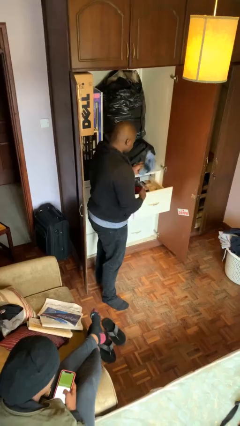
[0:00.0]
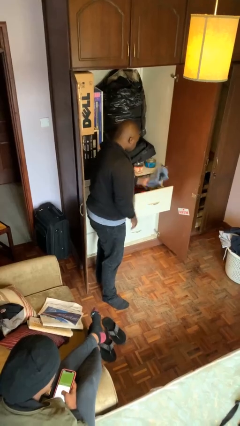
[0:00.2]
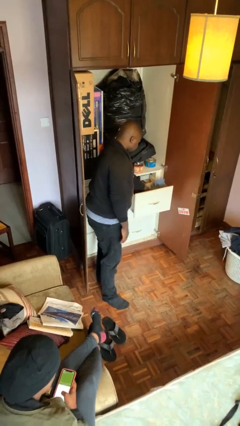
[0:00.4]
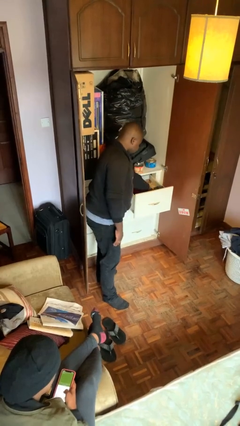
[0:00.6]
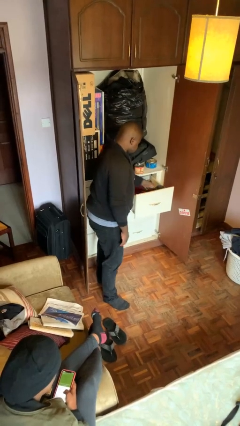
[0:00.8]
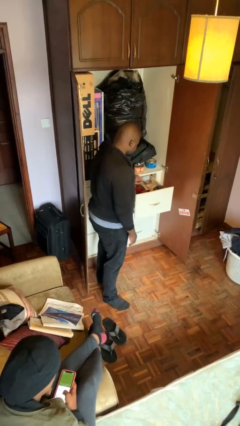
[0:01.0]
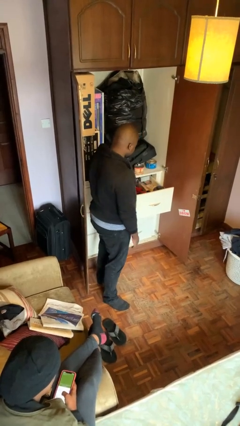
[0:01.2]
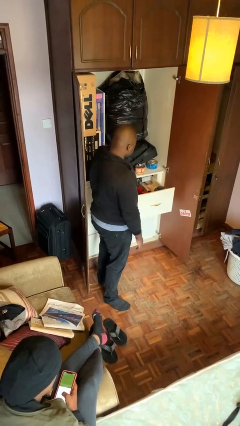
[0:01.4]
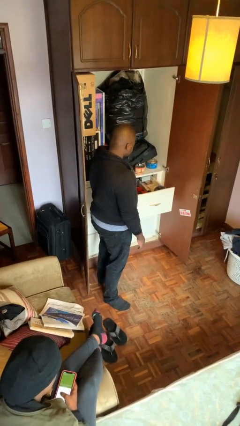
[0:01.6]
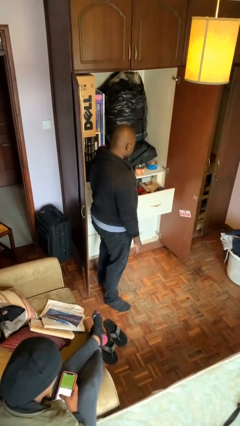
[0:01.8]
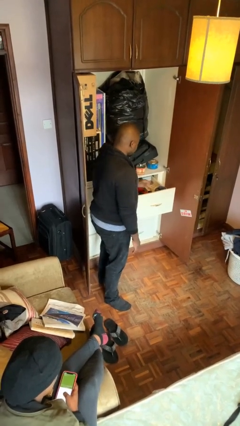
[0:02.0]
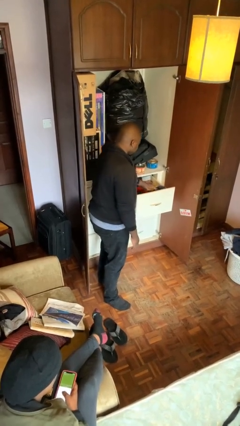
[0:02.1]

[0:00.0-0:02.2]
person puts clothes into dresser

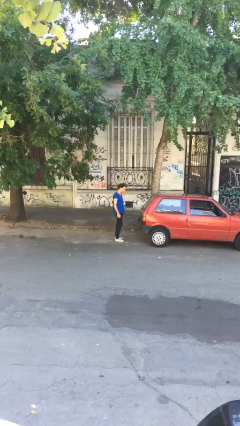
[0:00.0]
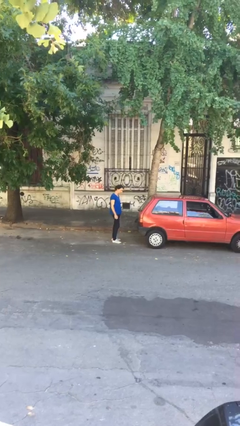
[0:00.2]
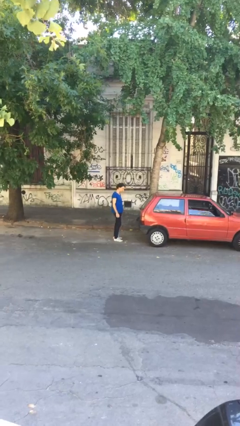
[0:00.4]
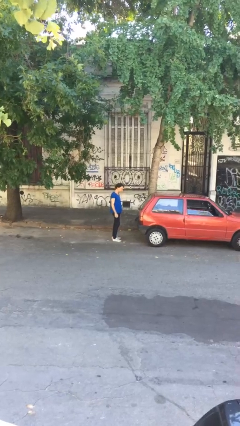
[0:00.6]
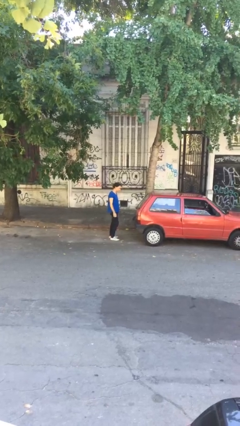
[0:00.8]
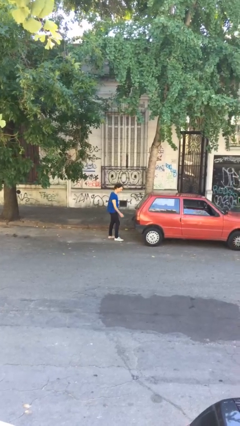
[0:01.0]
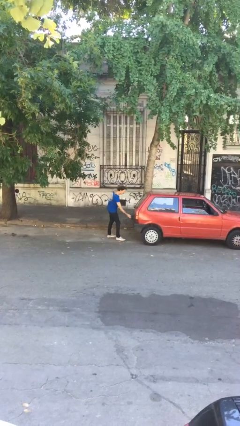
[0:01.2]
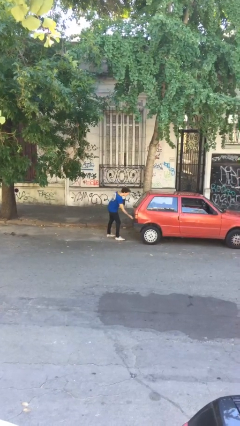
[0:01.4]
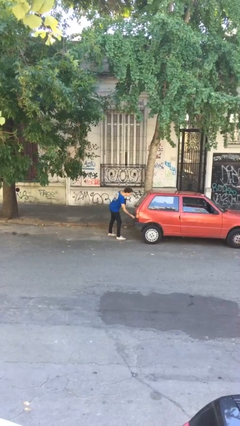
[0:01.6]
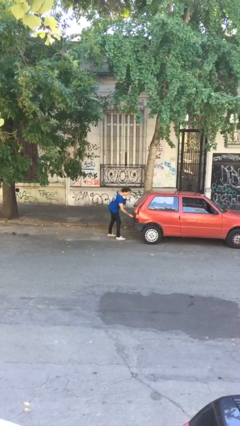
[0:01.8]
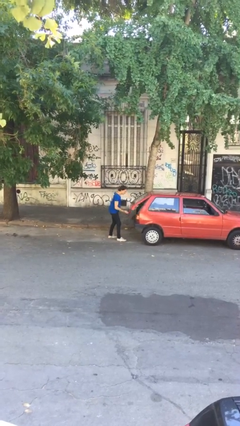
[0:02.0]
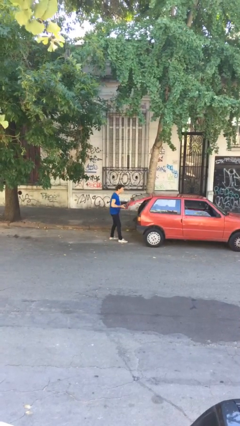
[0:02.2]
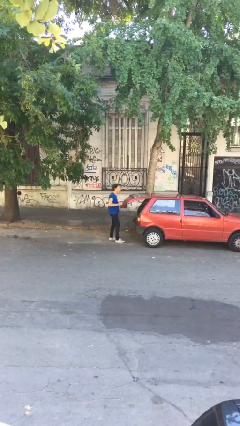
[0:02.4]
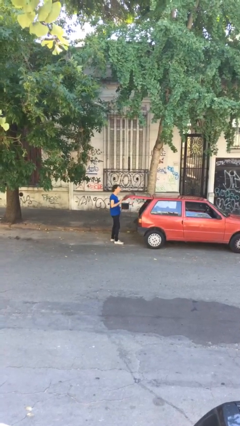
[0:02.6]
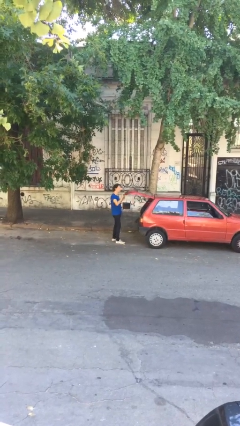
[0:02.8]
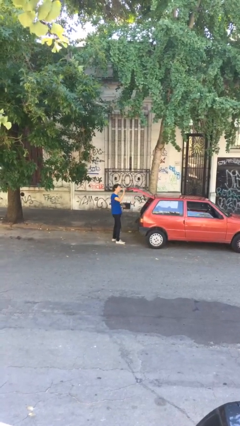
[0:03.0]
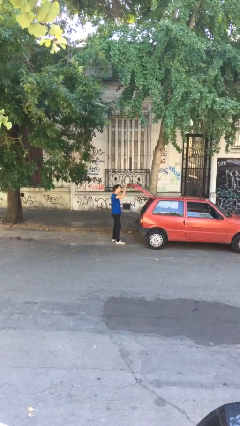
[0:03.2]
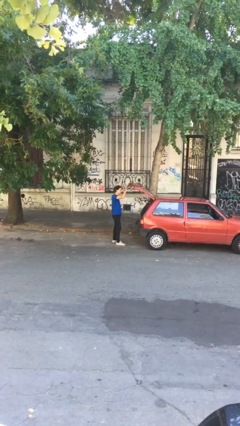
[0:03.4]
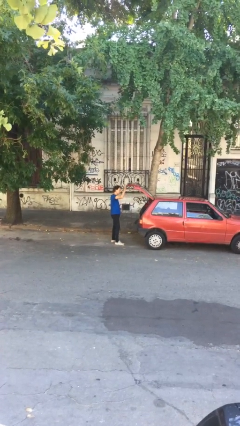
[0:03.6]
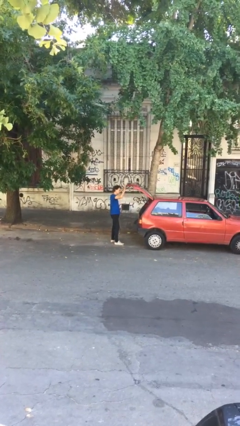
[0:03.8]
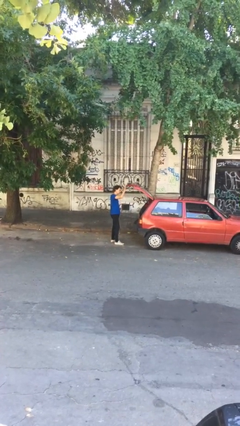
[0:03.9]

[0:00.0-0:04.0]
person opens car trunk

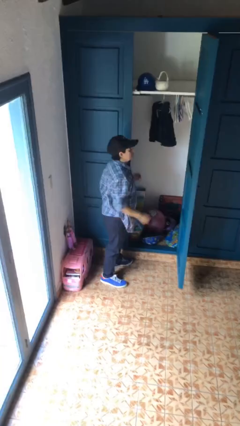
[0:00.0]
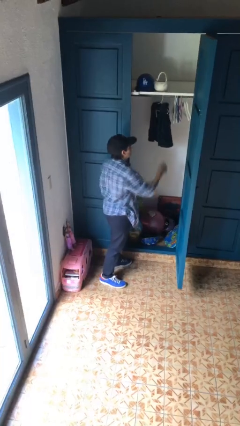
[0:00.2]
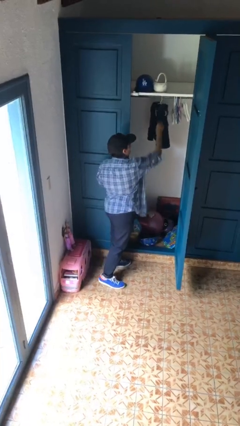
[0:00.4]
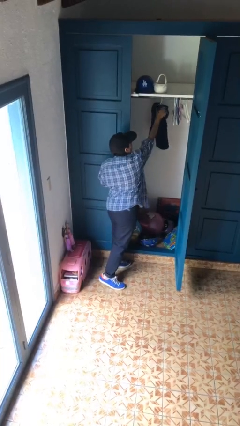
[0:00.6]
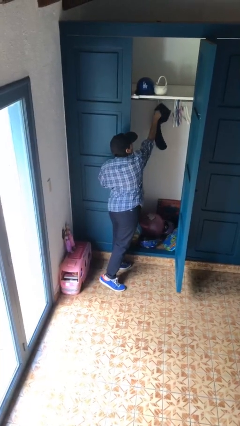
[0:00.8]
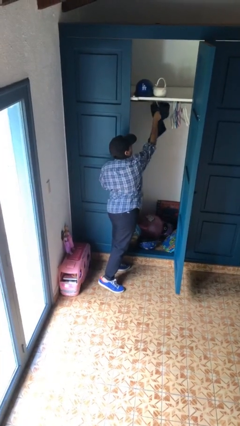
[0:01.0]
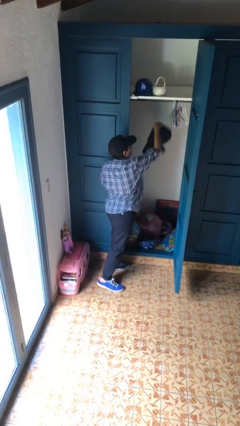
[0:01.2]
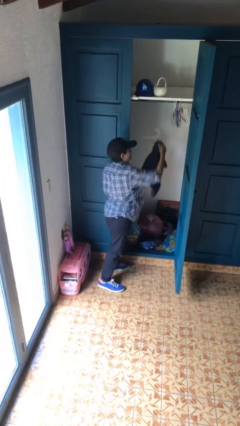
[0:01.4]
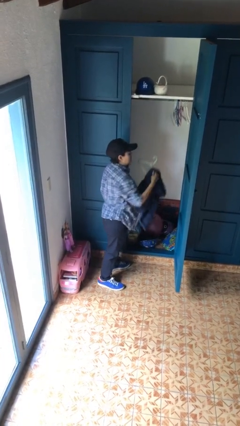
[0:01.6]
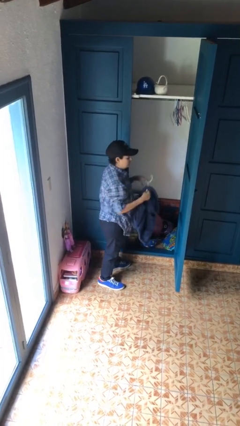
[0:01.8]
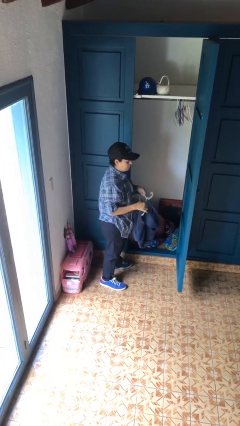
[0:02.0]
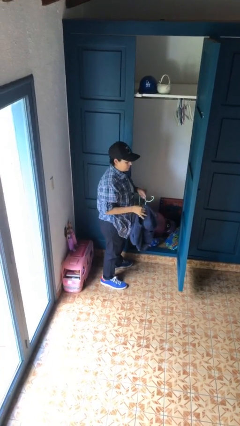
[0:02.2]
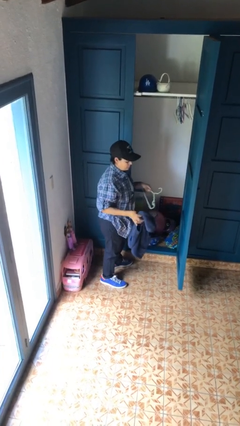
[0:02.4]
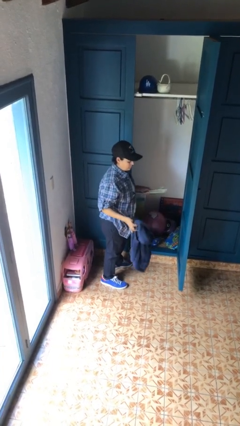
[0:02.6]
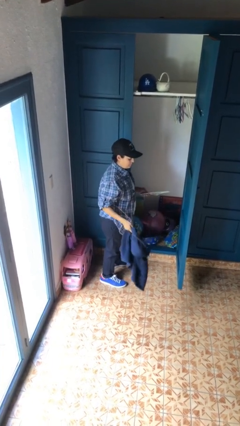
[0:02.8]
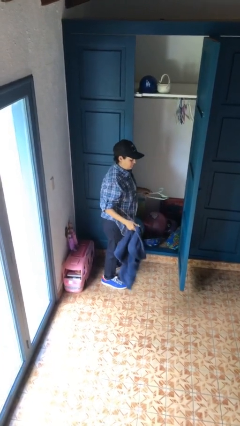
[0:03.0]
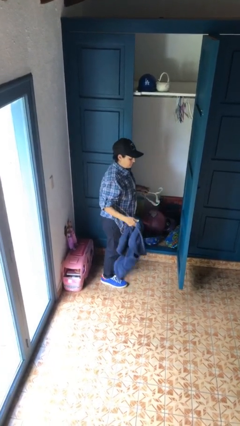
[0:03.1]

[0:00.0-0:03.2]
person takes clothes from closet

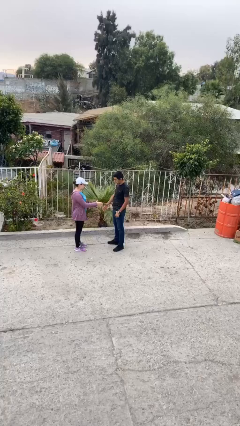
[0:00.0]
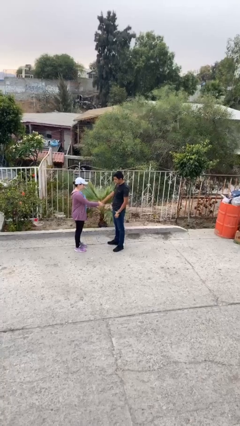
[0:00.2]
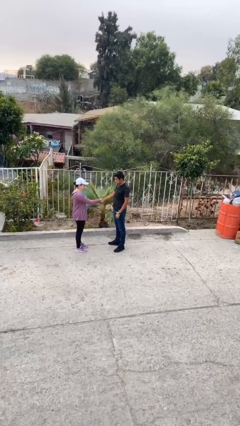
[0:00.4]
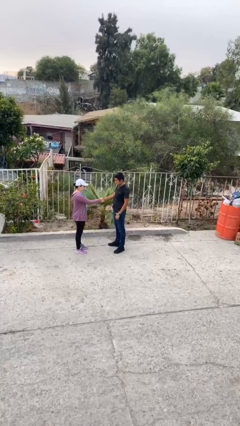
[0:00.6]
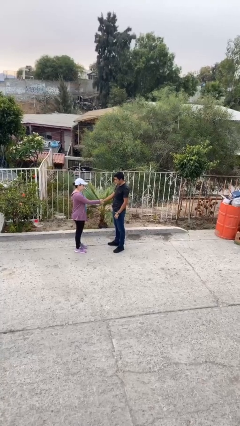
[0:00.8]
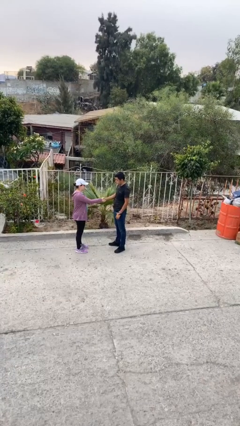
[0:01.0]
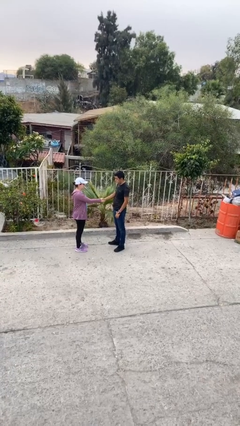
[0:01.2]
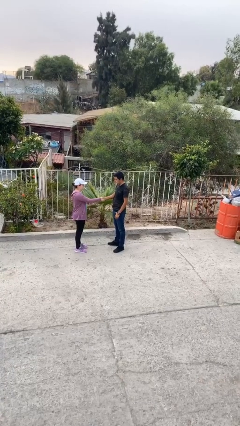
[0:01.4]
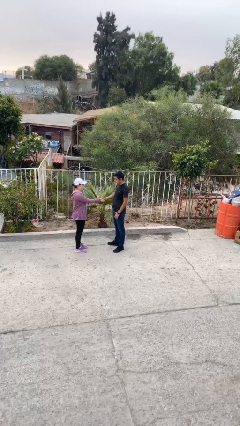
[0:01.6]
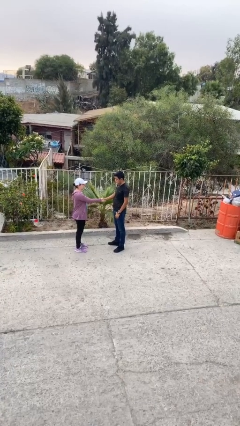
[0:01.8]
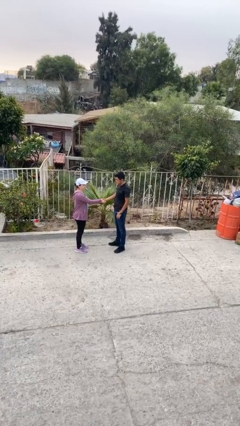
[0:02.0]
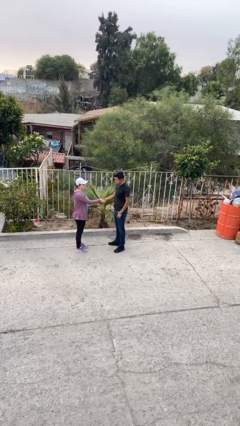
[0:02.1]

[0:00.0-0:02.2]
person shakes hand

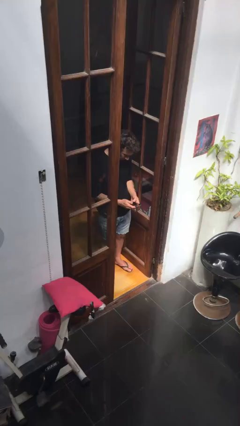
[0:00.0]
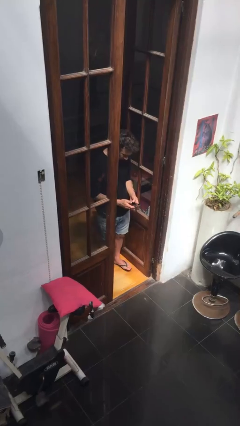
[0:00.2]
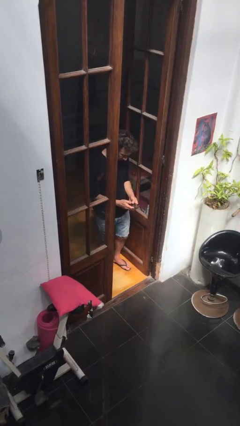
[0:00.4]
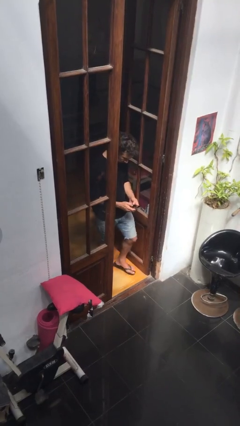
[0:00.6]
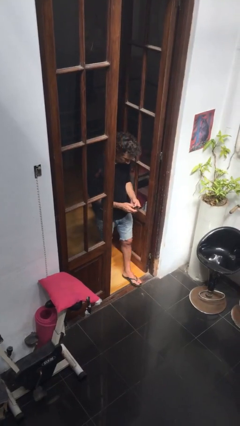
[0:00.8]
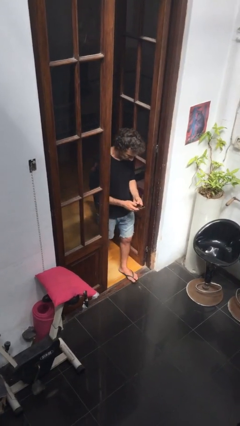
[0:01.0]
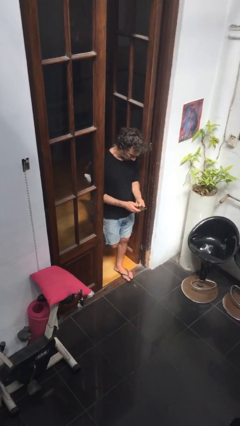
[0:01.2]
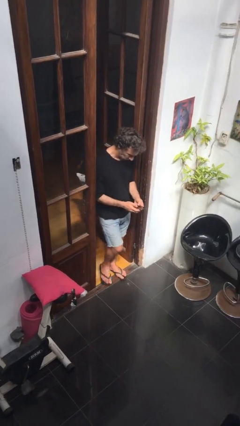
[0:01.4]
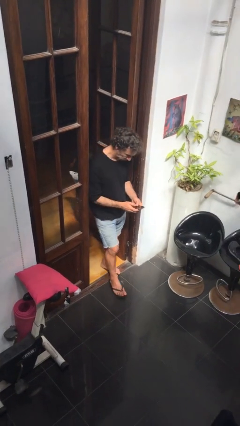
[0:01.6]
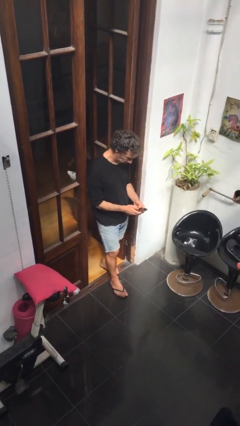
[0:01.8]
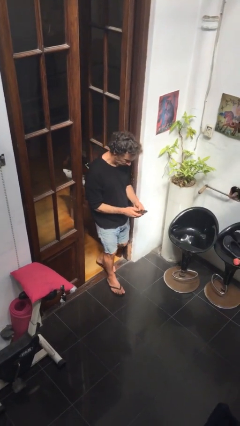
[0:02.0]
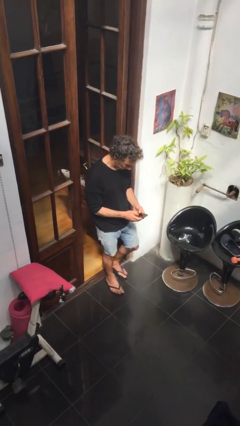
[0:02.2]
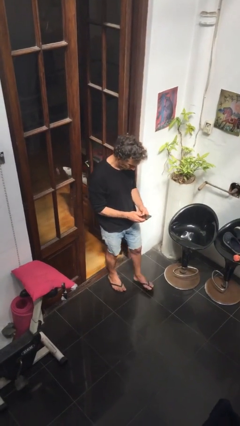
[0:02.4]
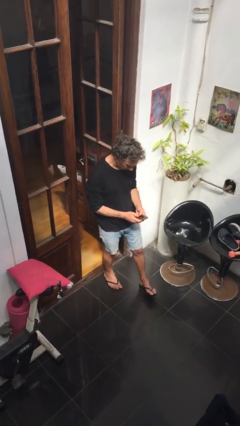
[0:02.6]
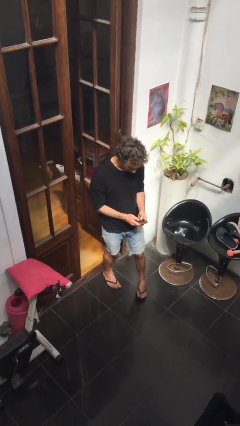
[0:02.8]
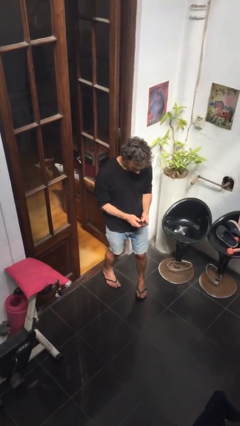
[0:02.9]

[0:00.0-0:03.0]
person enters scene through structure

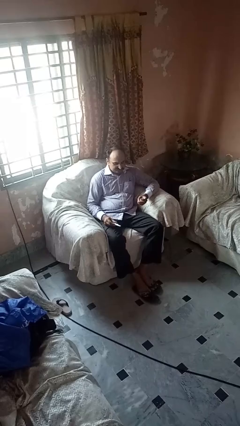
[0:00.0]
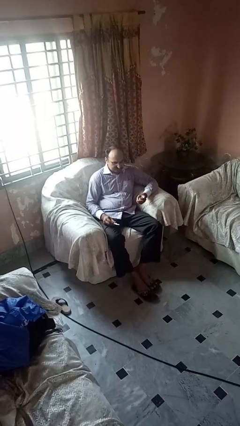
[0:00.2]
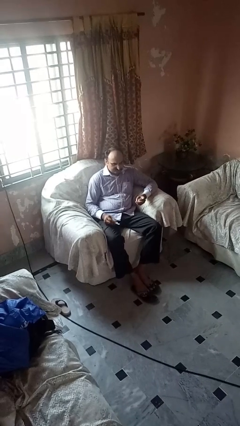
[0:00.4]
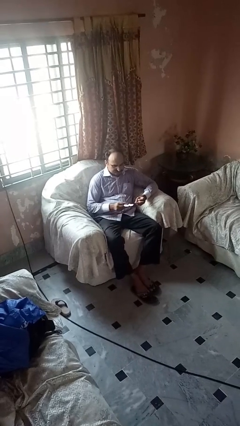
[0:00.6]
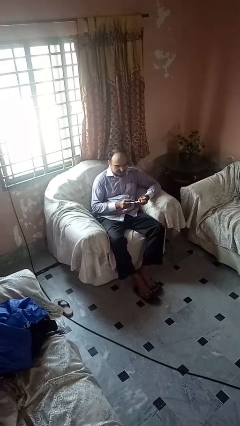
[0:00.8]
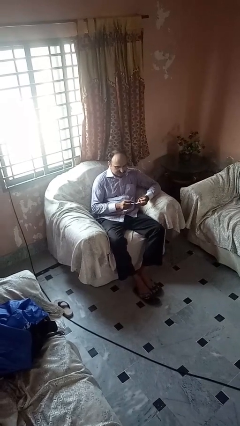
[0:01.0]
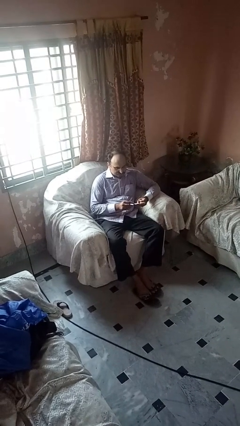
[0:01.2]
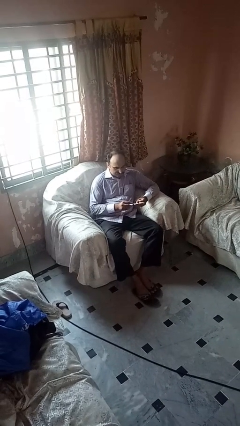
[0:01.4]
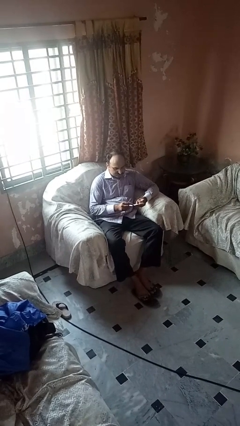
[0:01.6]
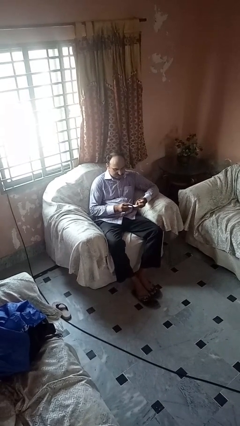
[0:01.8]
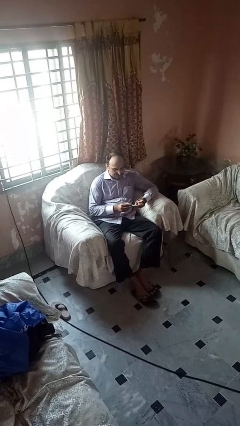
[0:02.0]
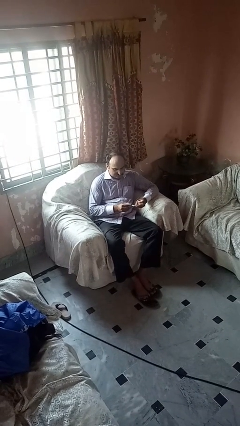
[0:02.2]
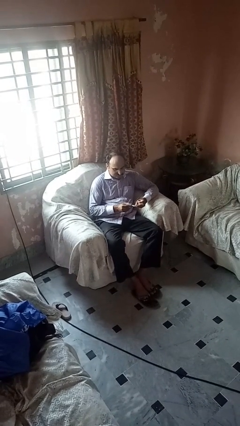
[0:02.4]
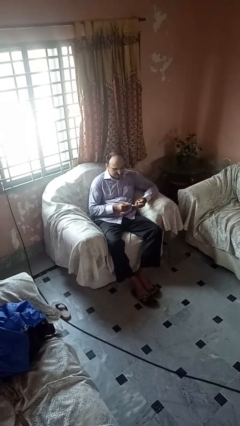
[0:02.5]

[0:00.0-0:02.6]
person files fingernails
